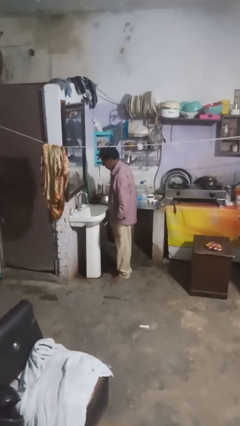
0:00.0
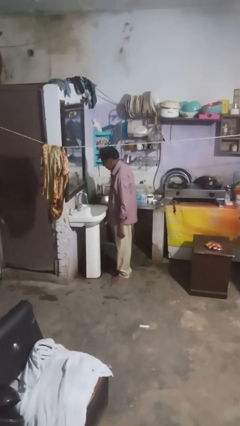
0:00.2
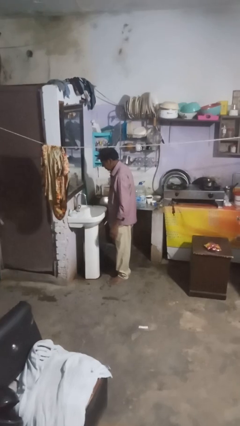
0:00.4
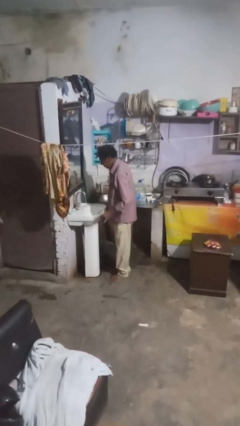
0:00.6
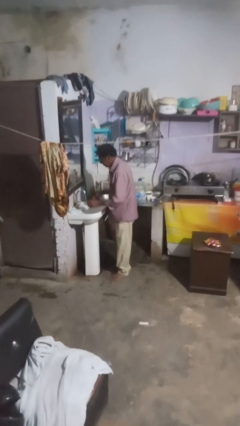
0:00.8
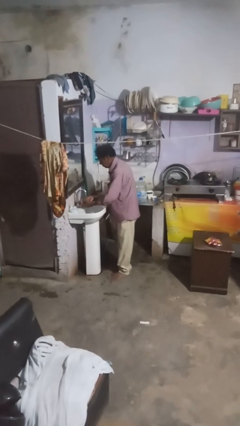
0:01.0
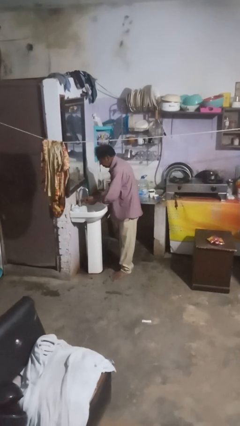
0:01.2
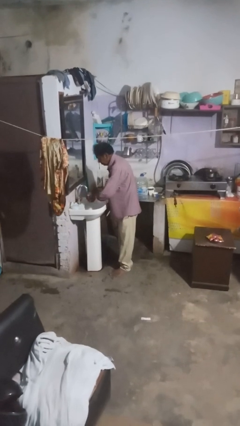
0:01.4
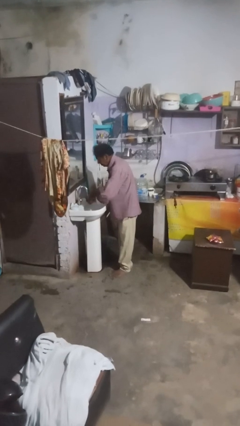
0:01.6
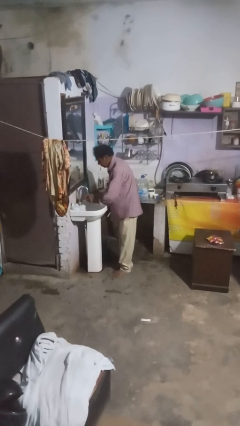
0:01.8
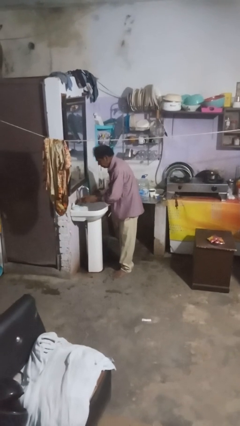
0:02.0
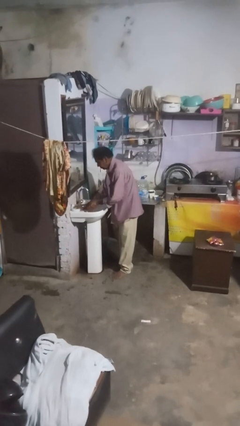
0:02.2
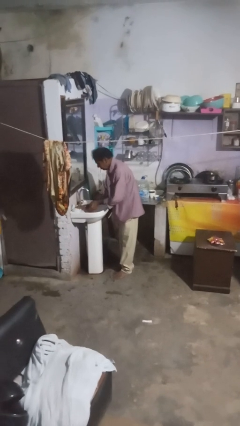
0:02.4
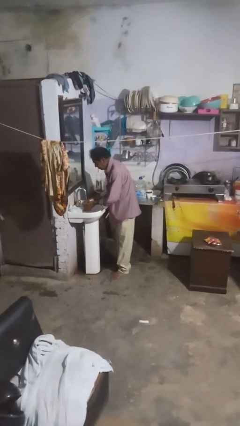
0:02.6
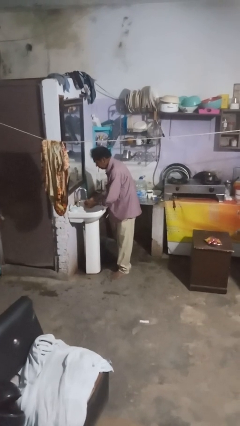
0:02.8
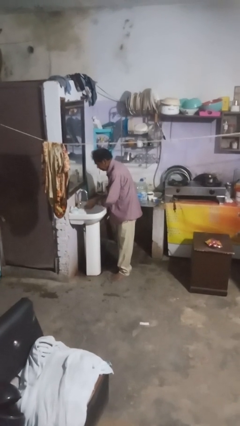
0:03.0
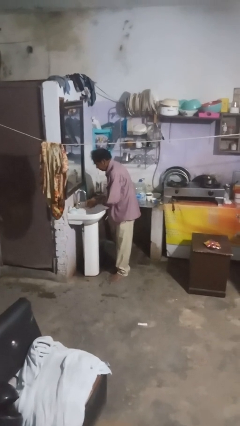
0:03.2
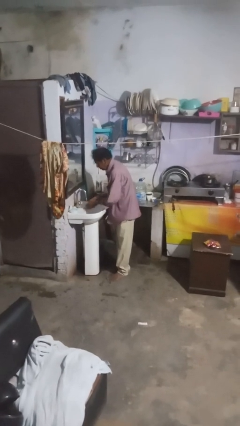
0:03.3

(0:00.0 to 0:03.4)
person washes hands

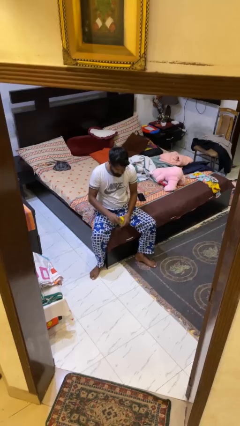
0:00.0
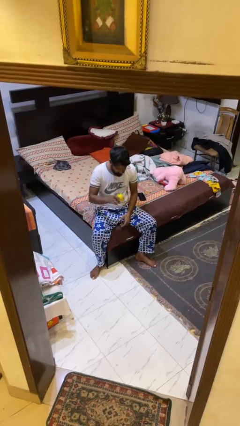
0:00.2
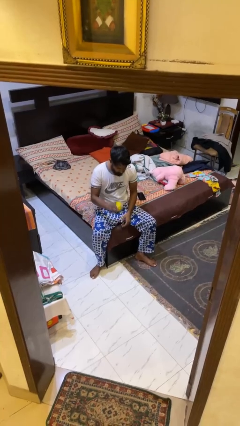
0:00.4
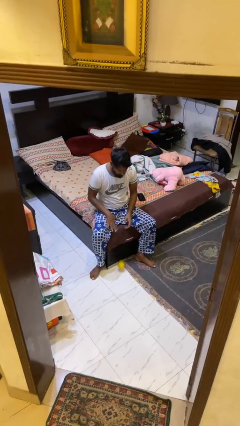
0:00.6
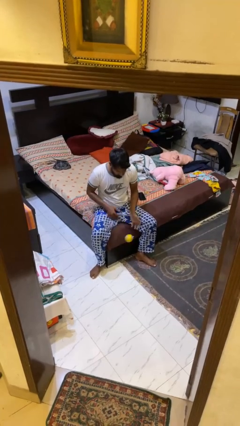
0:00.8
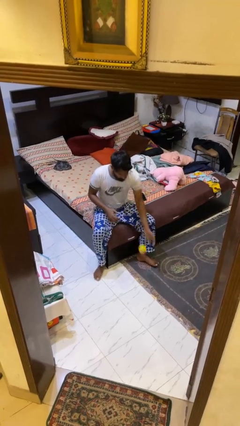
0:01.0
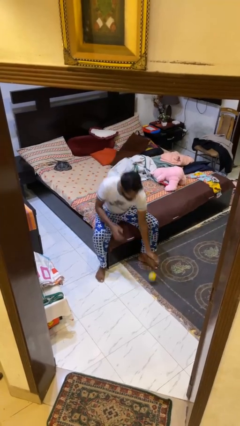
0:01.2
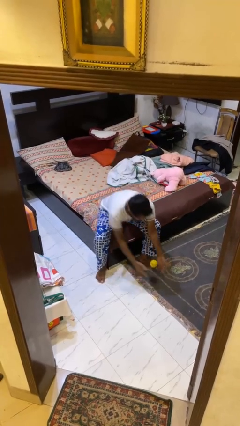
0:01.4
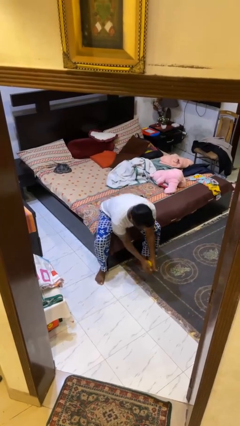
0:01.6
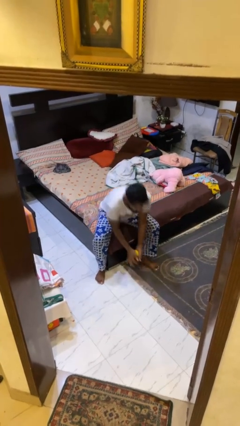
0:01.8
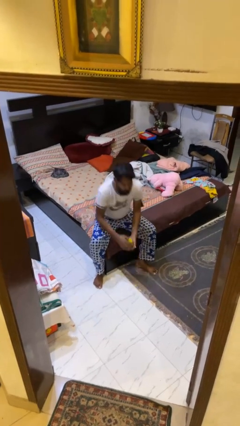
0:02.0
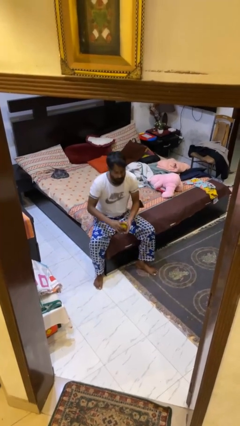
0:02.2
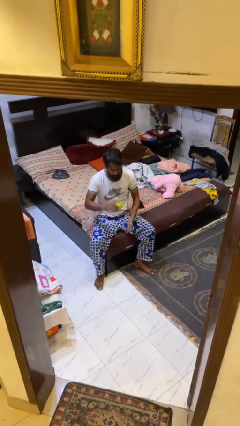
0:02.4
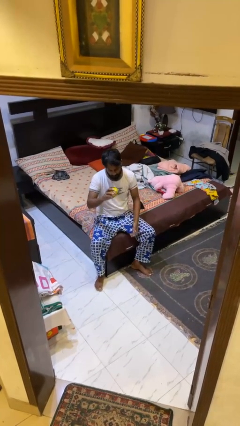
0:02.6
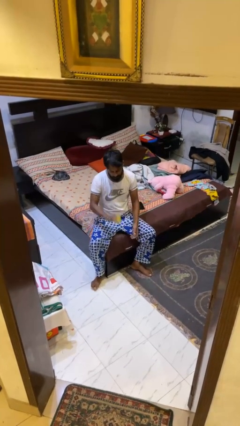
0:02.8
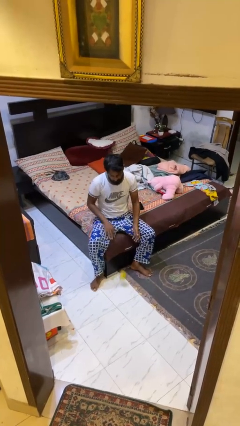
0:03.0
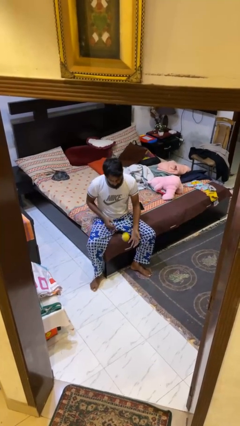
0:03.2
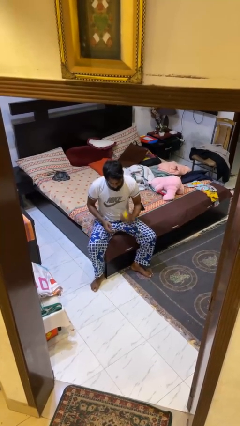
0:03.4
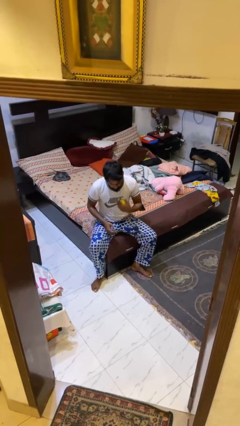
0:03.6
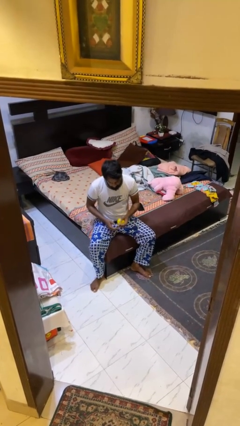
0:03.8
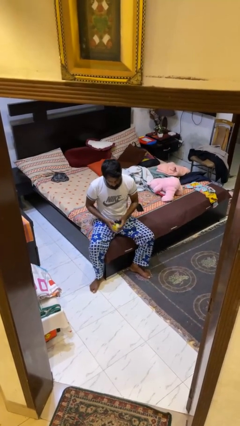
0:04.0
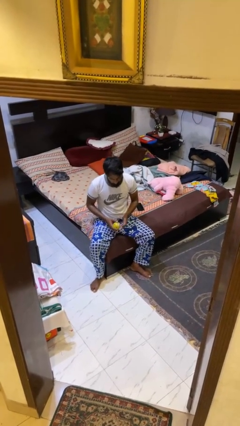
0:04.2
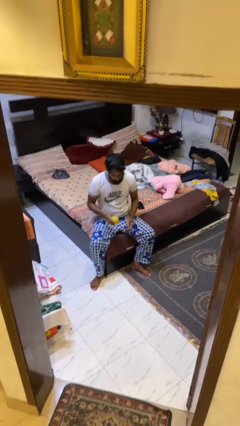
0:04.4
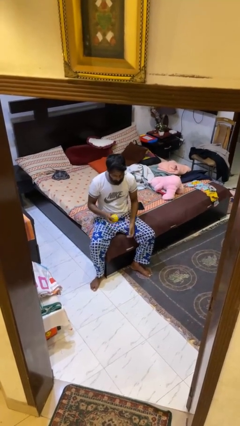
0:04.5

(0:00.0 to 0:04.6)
person bounces ball on floor

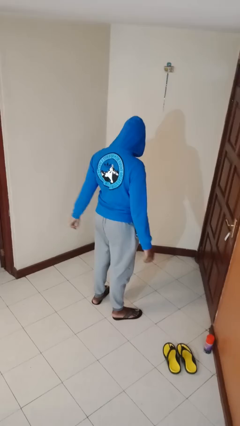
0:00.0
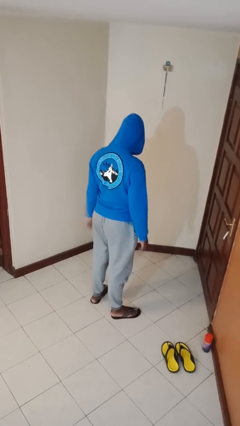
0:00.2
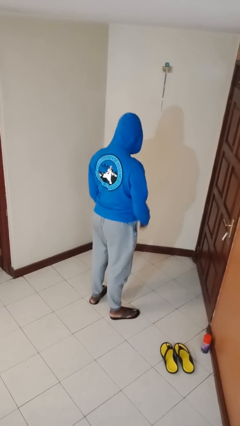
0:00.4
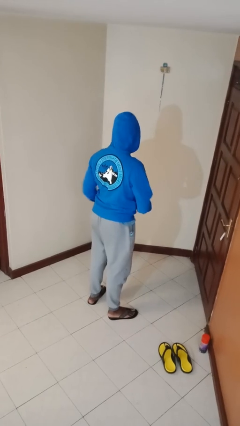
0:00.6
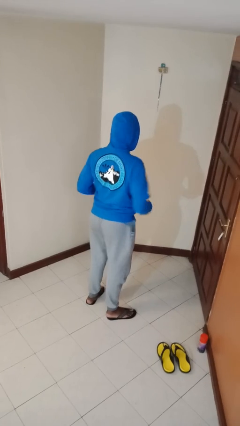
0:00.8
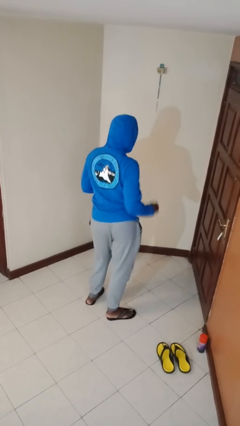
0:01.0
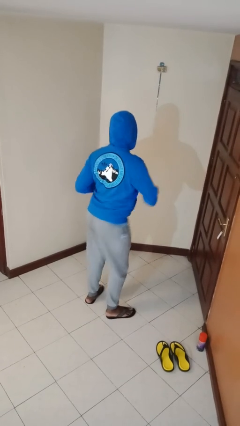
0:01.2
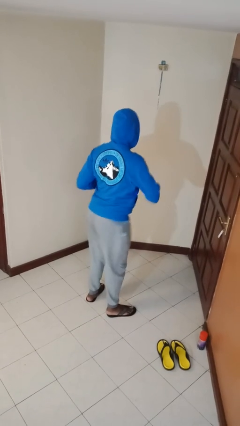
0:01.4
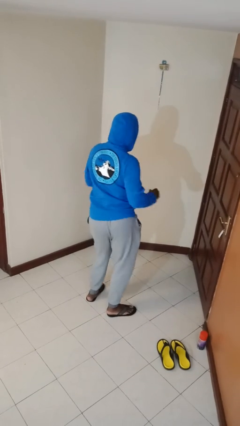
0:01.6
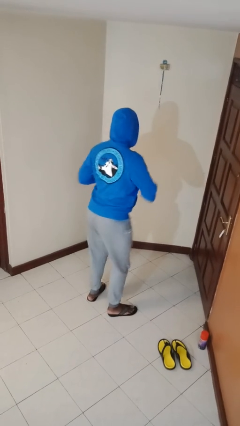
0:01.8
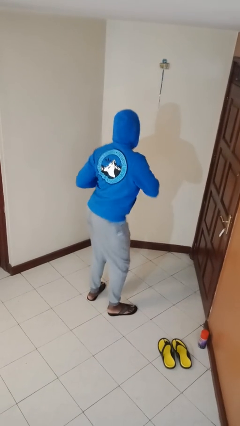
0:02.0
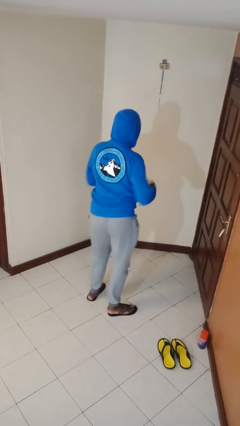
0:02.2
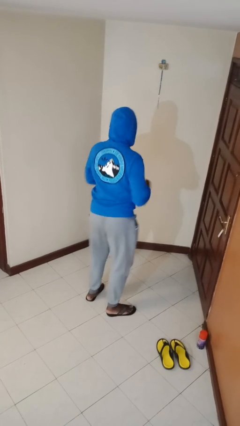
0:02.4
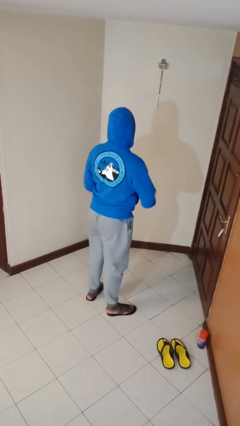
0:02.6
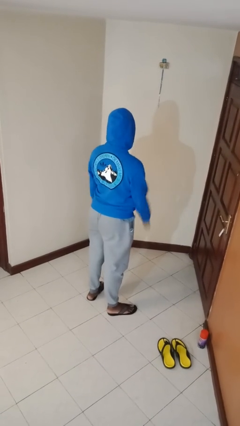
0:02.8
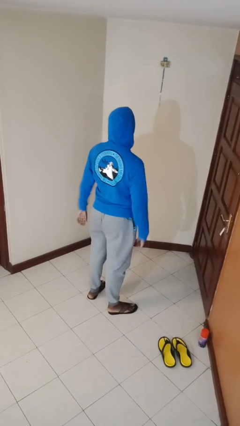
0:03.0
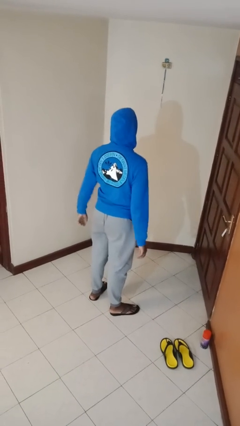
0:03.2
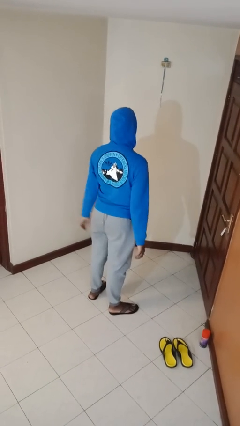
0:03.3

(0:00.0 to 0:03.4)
person wiggles hips

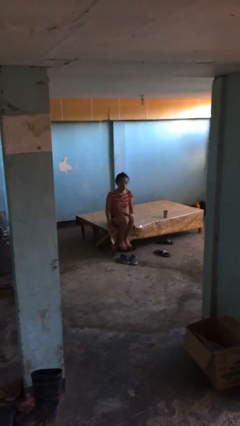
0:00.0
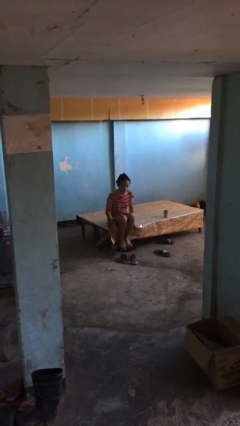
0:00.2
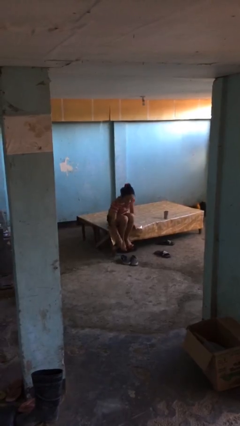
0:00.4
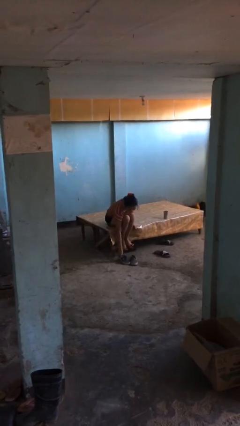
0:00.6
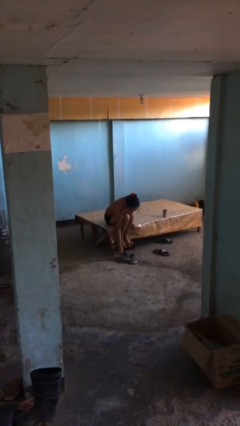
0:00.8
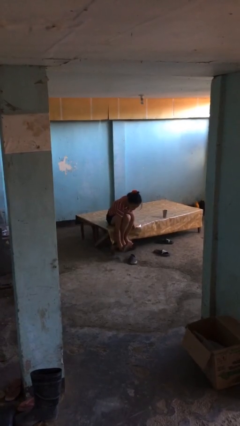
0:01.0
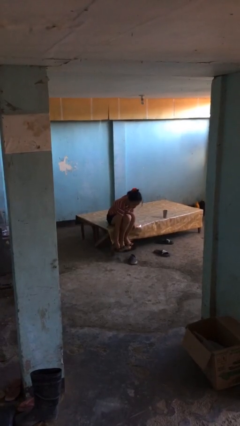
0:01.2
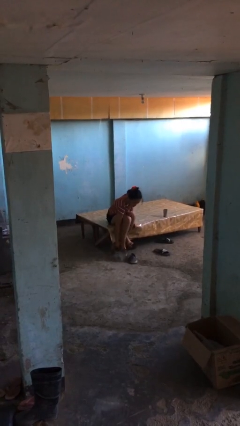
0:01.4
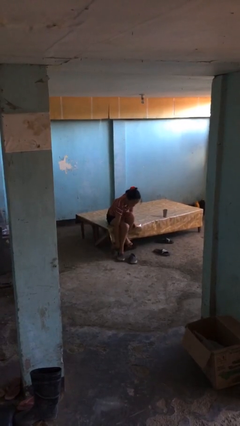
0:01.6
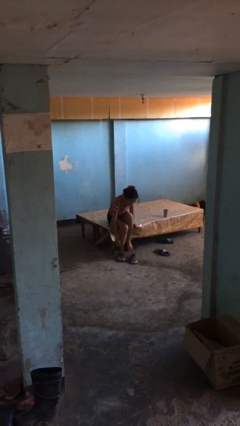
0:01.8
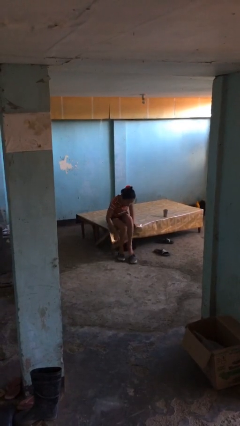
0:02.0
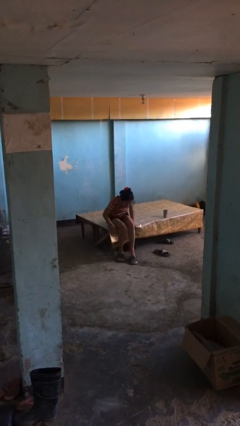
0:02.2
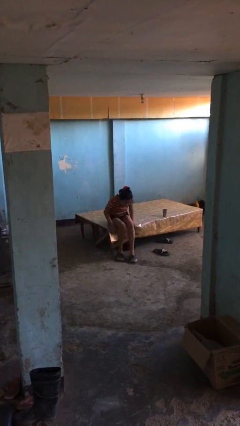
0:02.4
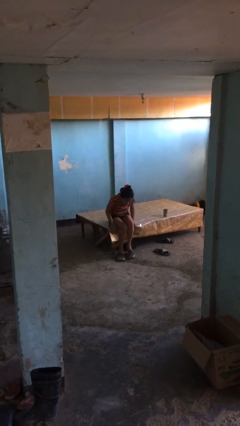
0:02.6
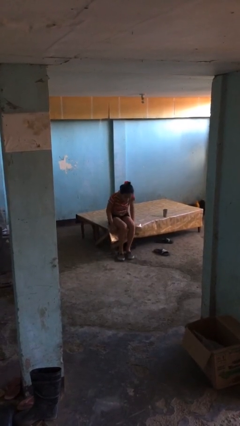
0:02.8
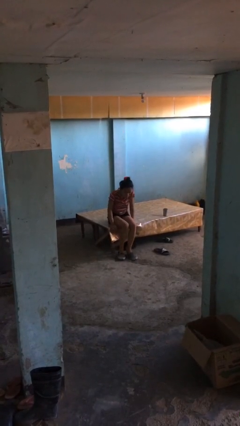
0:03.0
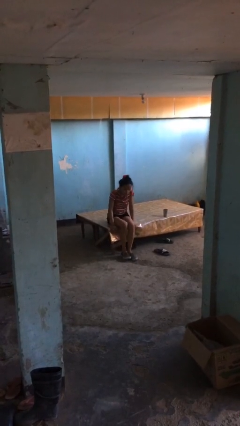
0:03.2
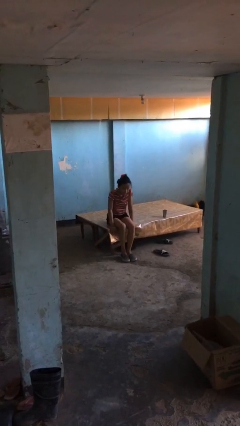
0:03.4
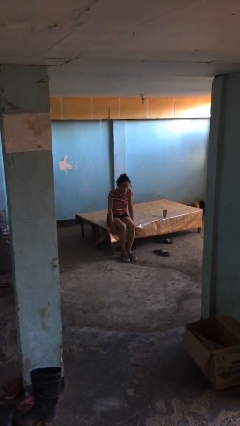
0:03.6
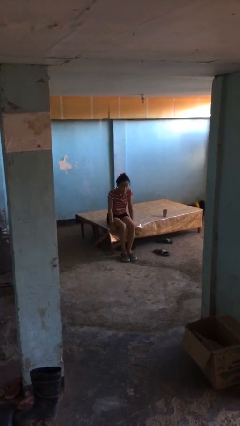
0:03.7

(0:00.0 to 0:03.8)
person puts on shoes

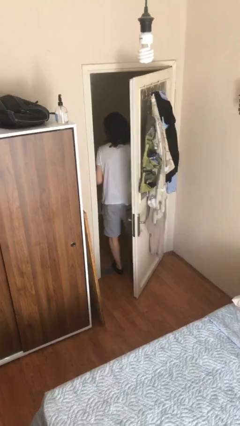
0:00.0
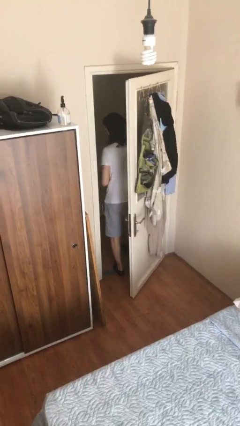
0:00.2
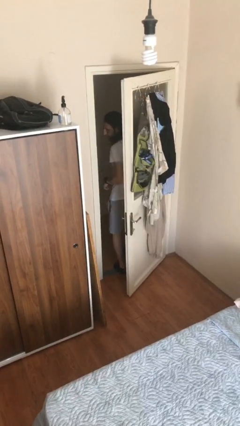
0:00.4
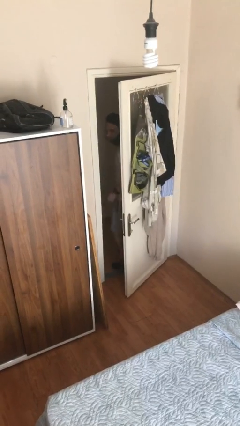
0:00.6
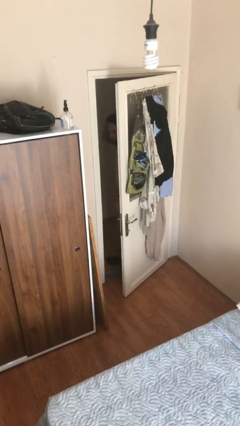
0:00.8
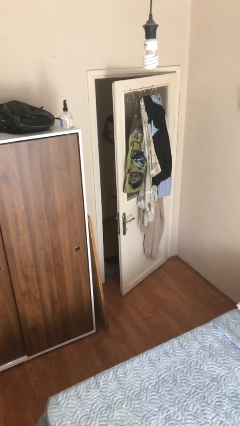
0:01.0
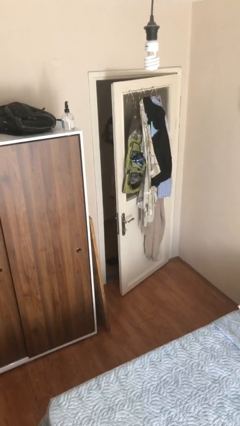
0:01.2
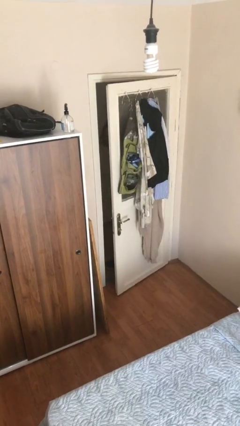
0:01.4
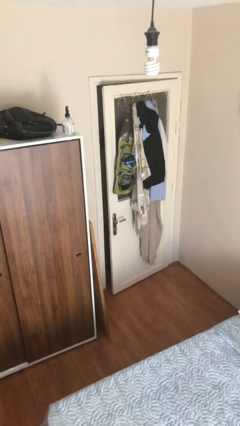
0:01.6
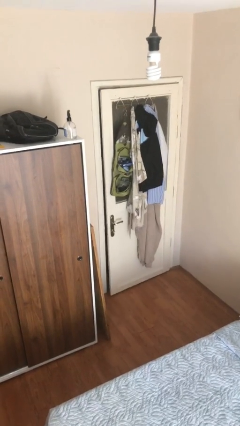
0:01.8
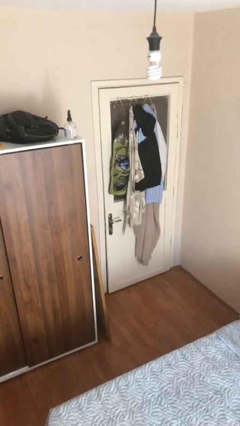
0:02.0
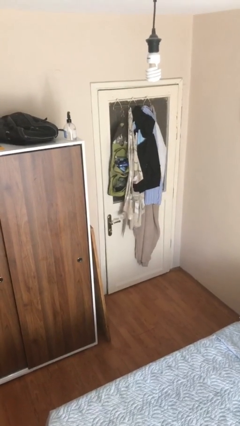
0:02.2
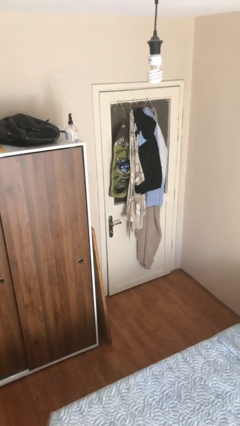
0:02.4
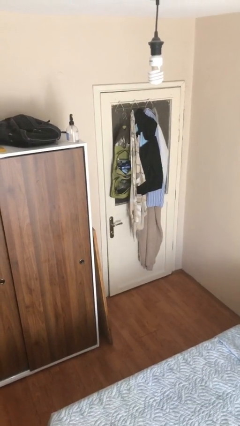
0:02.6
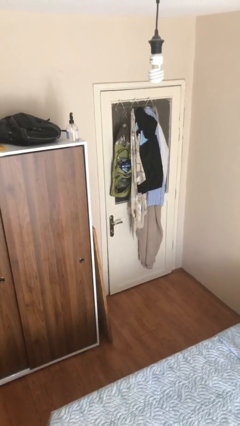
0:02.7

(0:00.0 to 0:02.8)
person closes facility door
